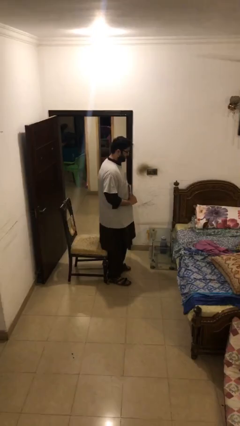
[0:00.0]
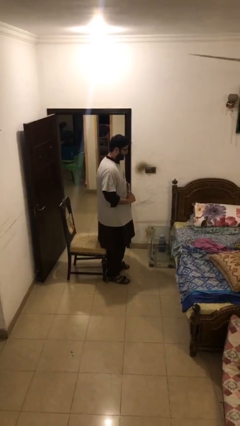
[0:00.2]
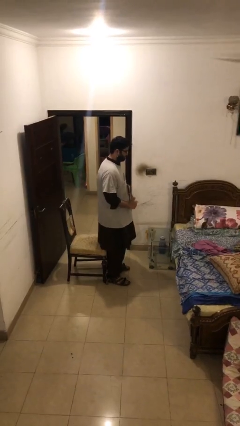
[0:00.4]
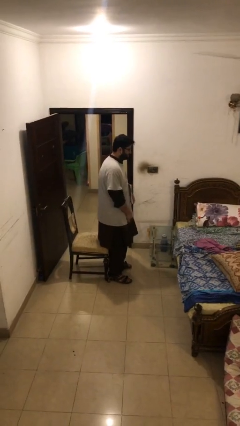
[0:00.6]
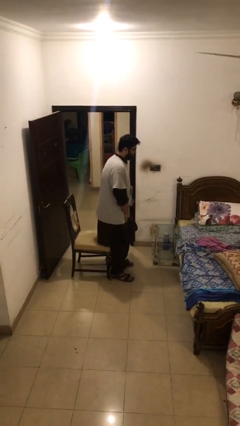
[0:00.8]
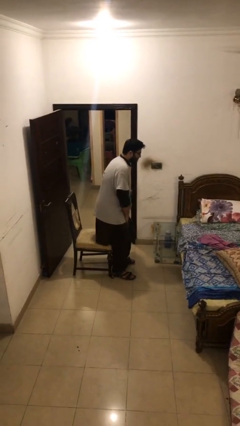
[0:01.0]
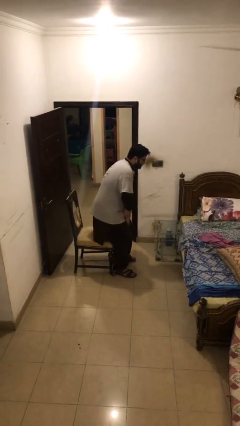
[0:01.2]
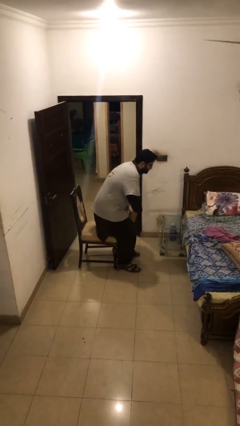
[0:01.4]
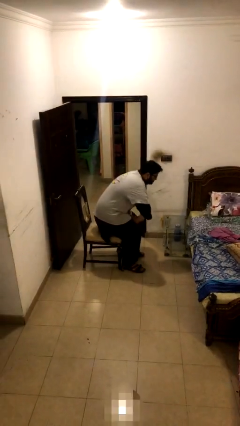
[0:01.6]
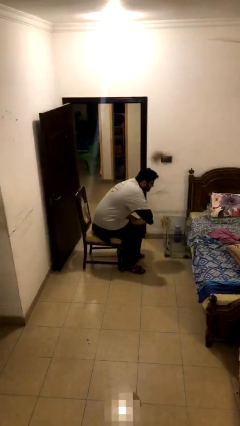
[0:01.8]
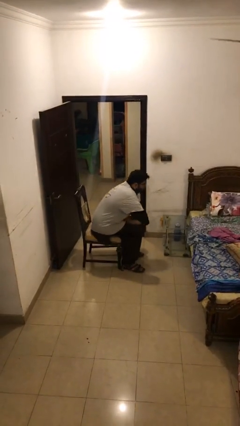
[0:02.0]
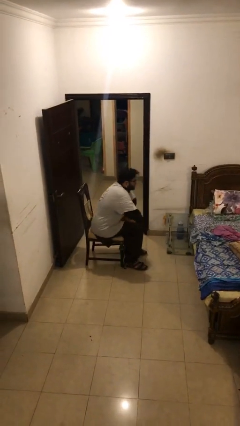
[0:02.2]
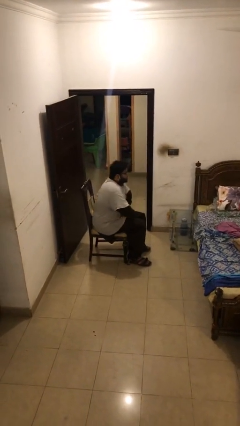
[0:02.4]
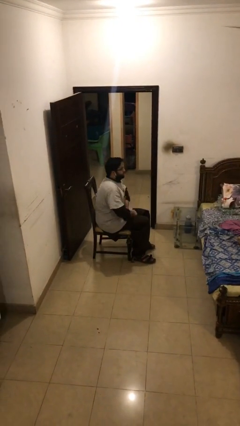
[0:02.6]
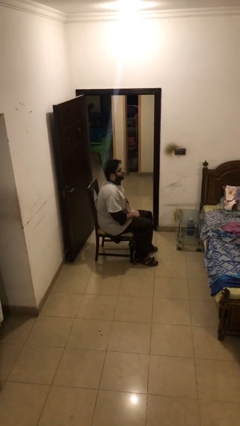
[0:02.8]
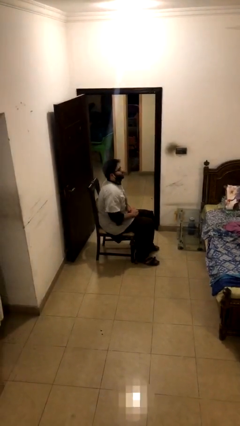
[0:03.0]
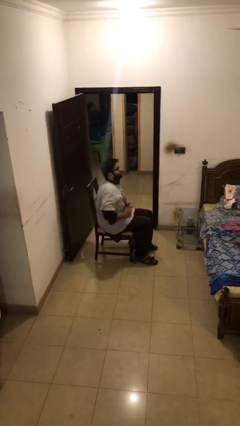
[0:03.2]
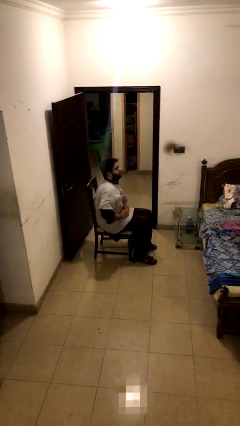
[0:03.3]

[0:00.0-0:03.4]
person sits down

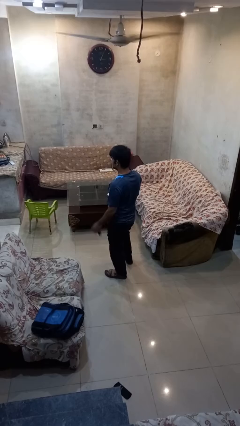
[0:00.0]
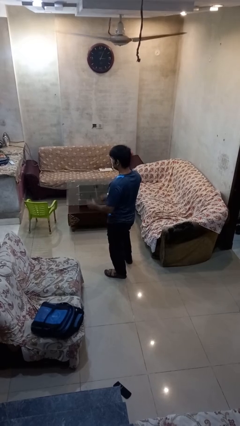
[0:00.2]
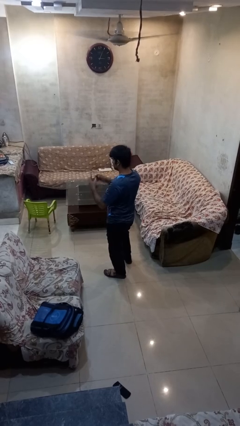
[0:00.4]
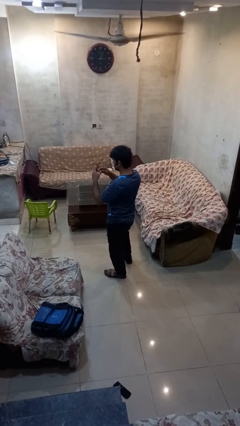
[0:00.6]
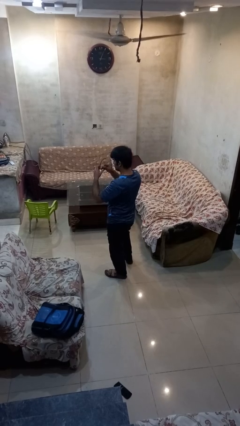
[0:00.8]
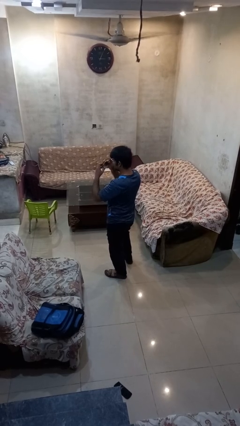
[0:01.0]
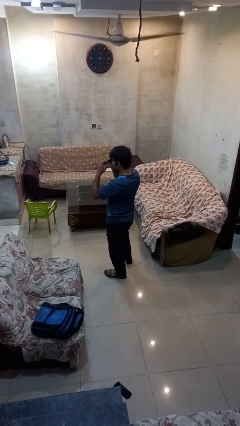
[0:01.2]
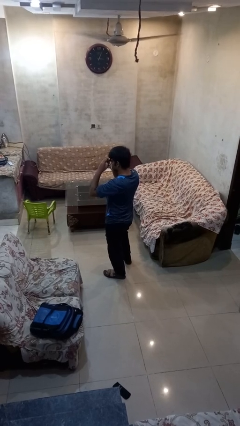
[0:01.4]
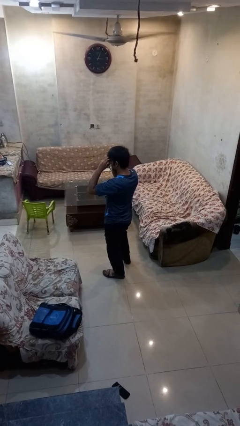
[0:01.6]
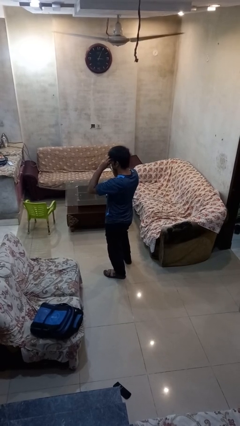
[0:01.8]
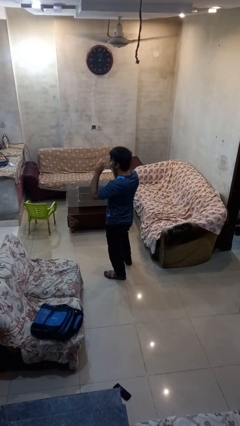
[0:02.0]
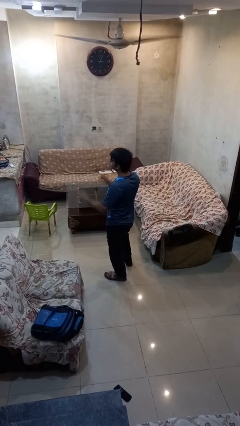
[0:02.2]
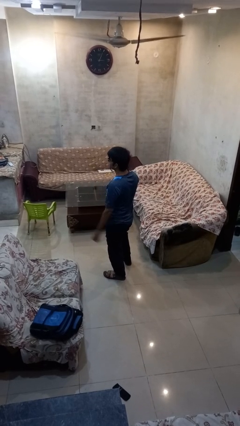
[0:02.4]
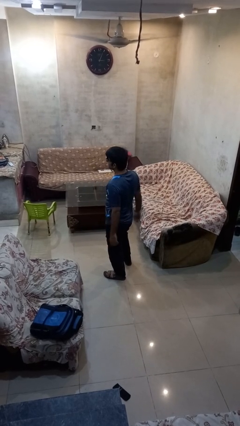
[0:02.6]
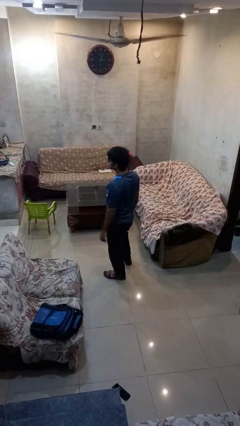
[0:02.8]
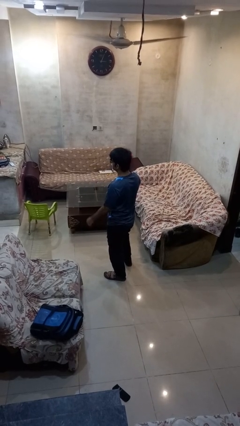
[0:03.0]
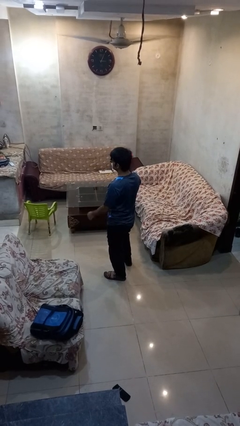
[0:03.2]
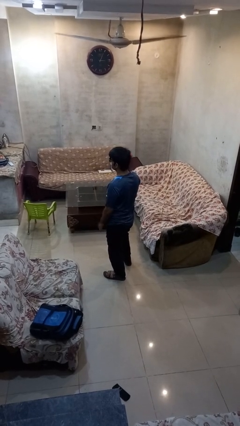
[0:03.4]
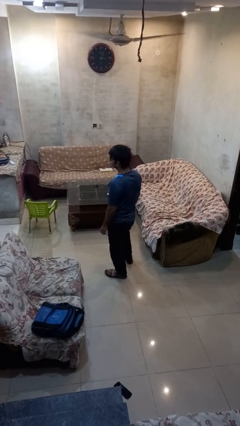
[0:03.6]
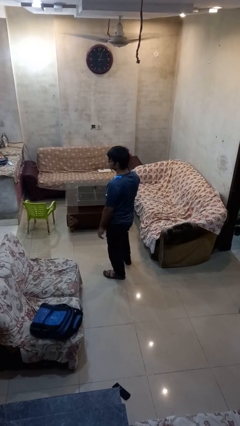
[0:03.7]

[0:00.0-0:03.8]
person puts on sunglasses

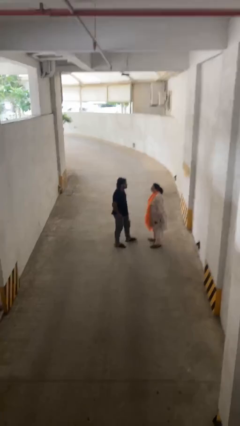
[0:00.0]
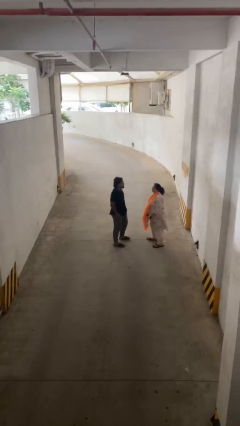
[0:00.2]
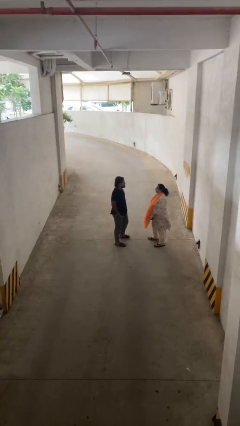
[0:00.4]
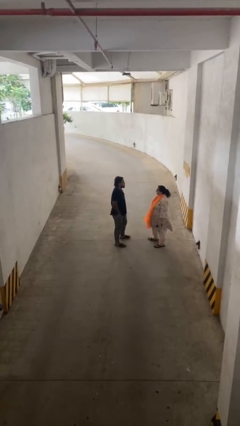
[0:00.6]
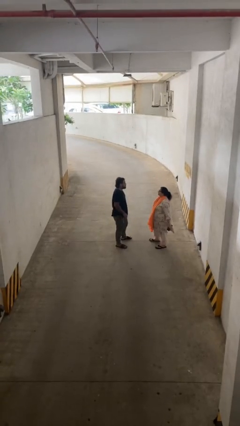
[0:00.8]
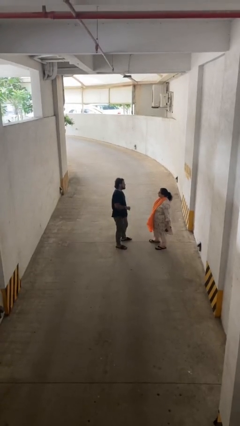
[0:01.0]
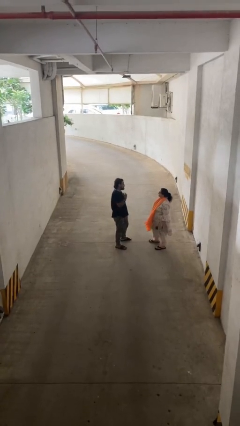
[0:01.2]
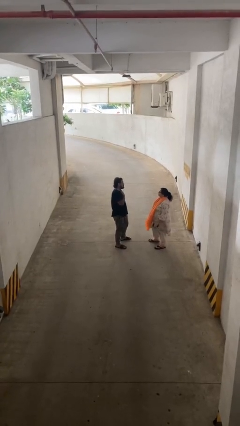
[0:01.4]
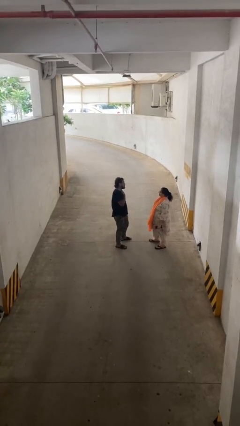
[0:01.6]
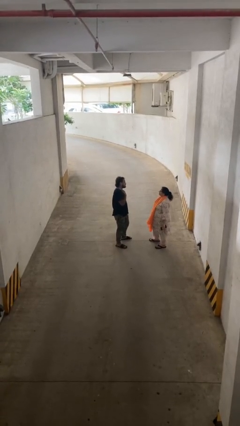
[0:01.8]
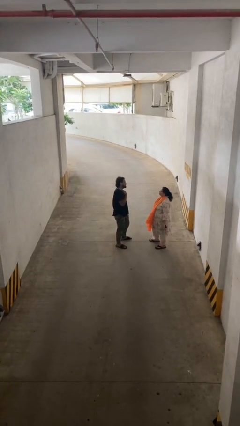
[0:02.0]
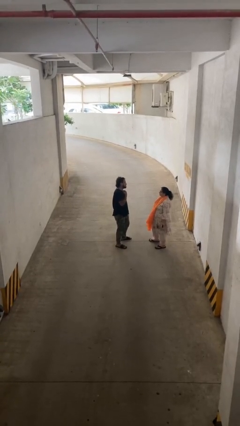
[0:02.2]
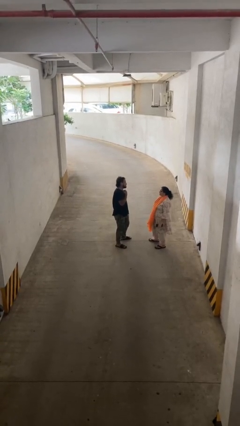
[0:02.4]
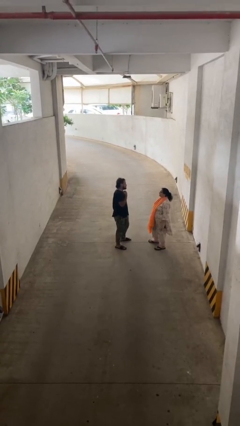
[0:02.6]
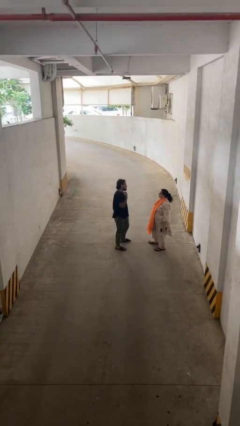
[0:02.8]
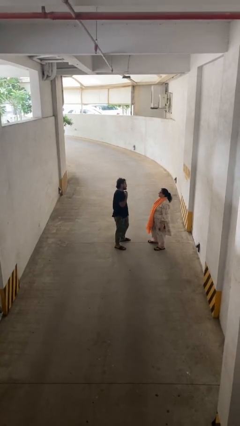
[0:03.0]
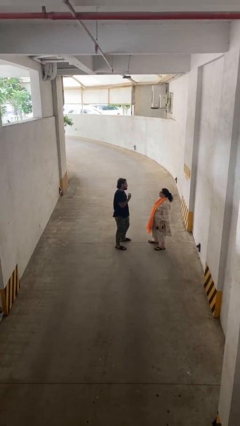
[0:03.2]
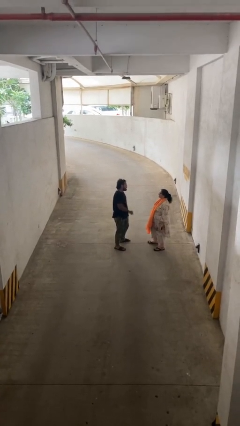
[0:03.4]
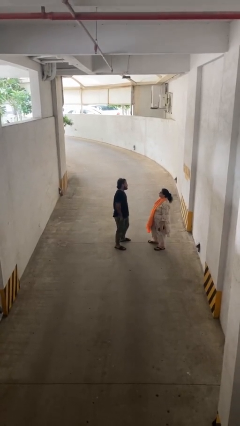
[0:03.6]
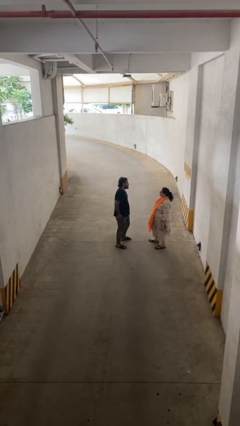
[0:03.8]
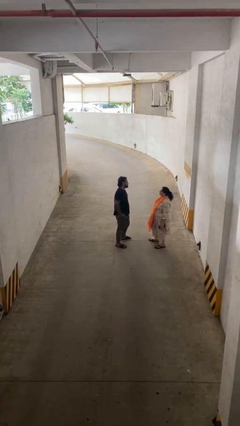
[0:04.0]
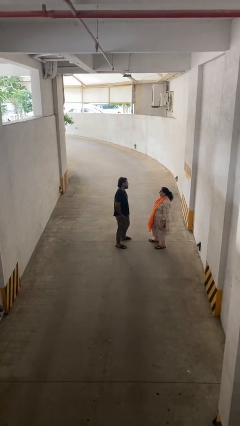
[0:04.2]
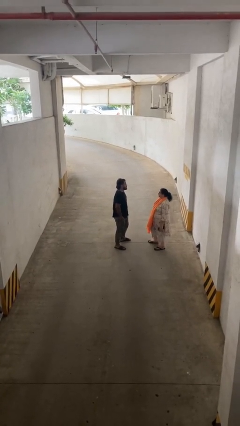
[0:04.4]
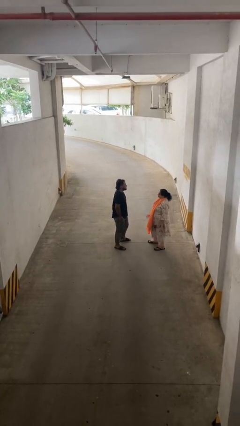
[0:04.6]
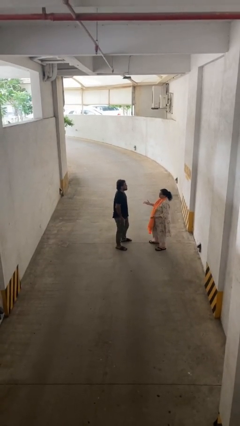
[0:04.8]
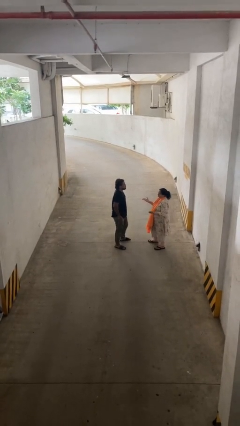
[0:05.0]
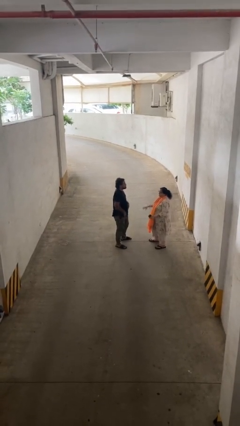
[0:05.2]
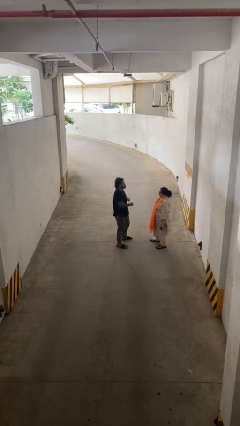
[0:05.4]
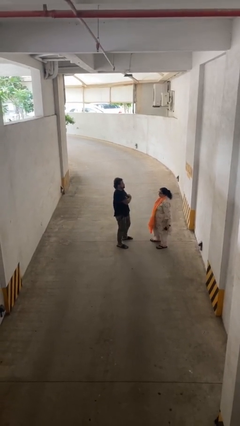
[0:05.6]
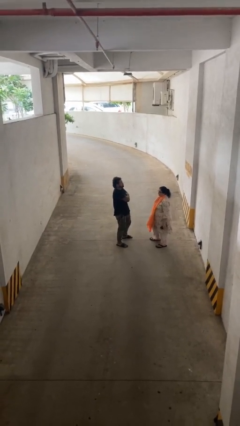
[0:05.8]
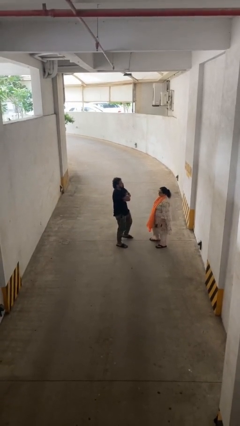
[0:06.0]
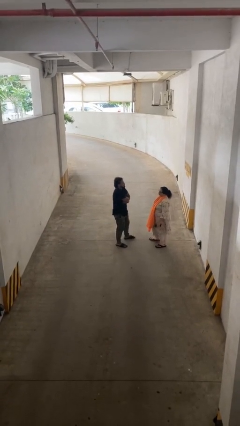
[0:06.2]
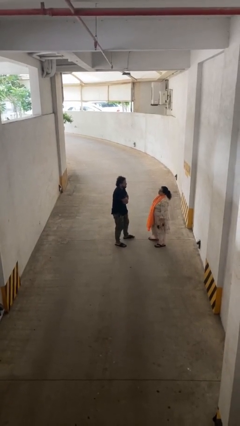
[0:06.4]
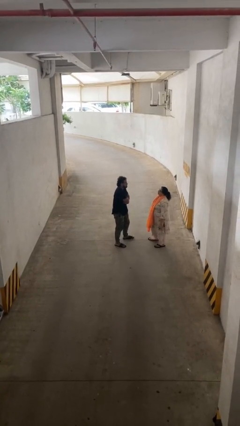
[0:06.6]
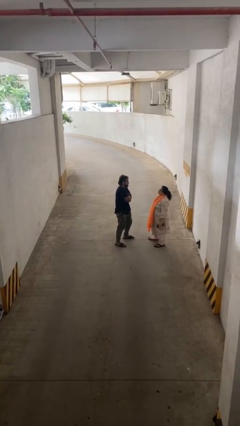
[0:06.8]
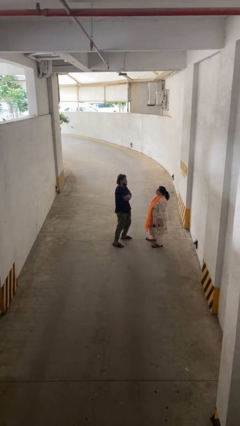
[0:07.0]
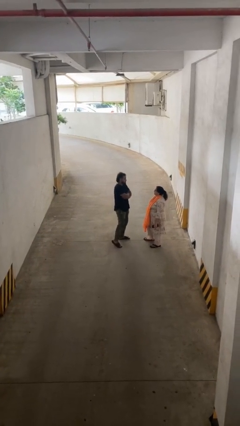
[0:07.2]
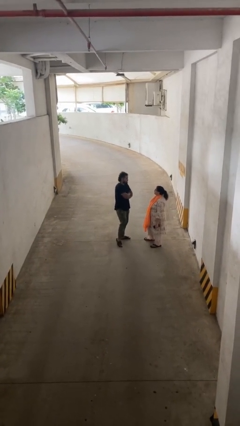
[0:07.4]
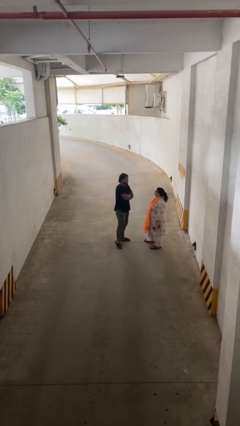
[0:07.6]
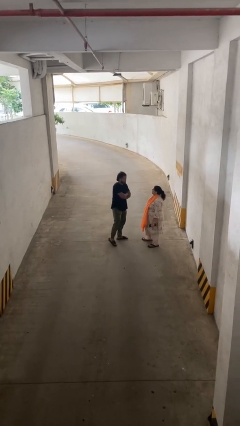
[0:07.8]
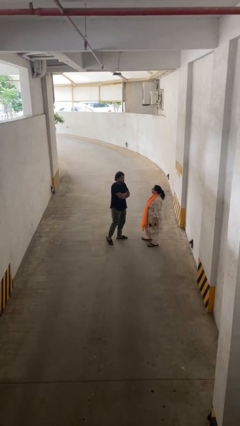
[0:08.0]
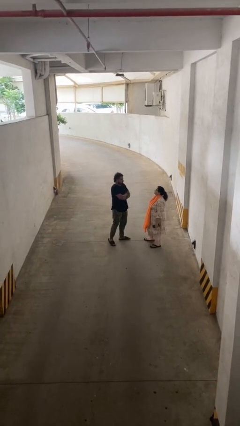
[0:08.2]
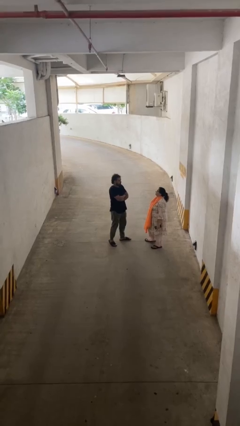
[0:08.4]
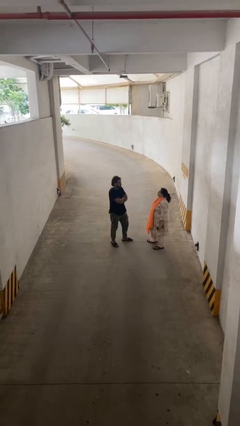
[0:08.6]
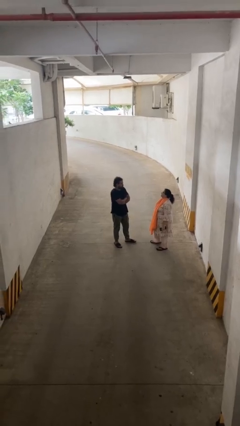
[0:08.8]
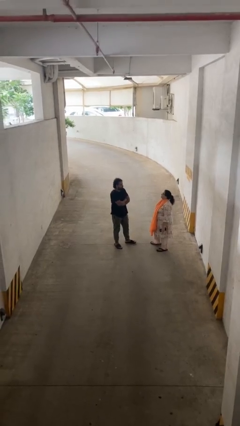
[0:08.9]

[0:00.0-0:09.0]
person talks to person

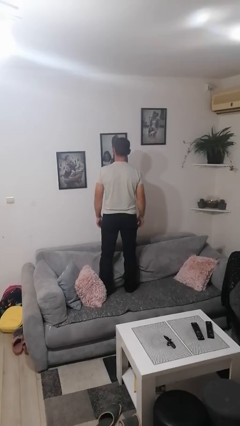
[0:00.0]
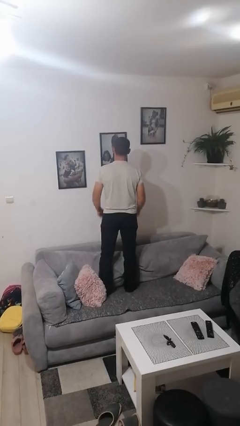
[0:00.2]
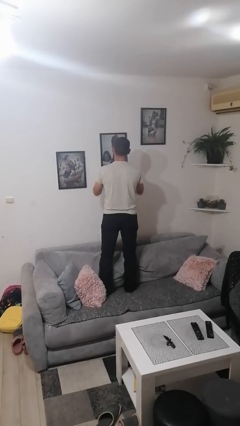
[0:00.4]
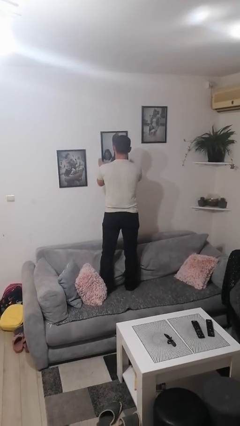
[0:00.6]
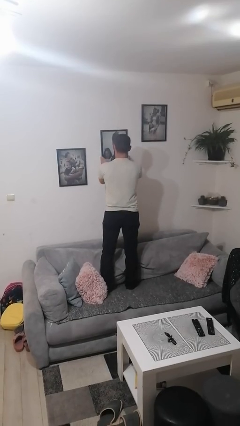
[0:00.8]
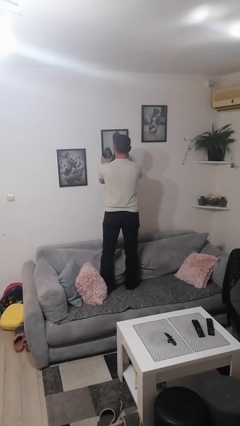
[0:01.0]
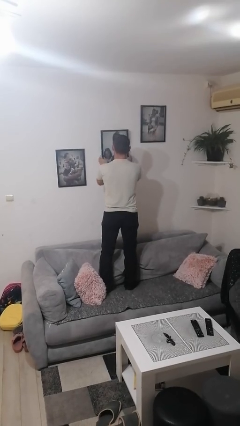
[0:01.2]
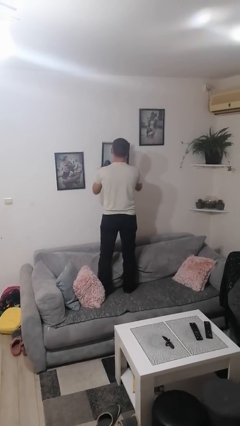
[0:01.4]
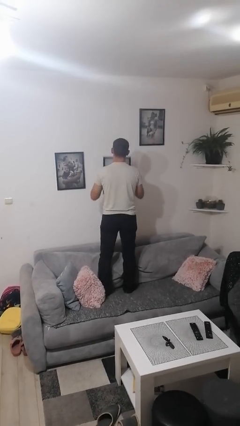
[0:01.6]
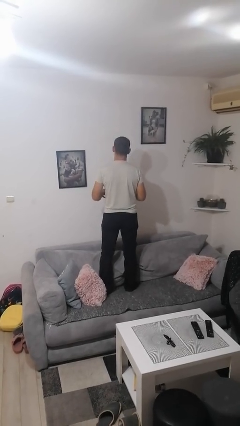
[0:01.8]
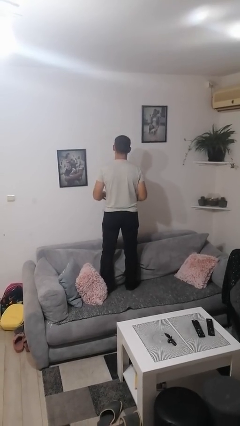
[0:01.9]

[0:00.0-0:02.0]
person takes down picture frame
